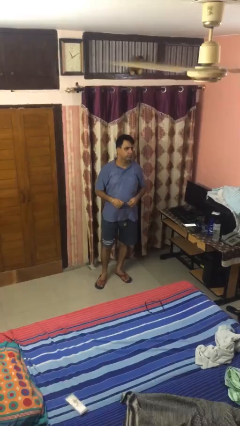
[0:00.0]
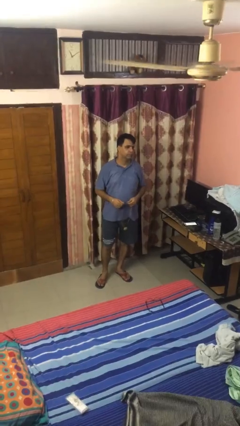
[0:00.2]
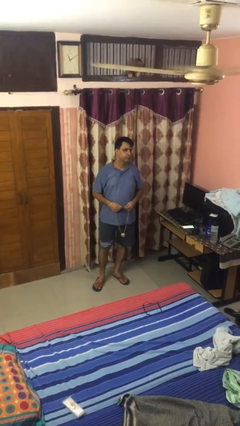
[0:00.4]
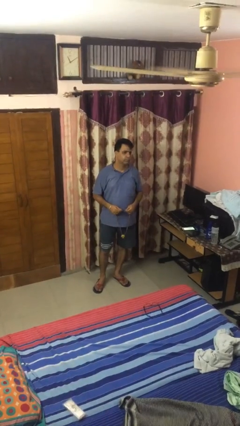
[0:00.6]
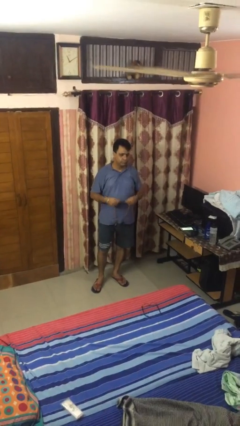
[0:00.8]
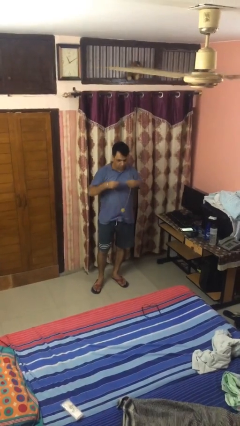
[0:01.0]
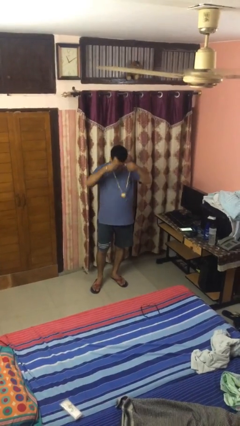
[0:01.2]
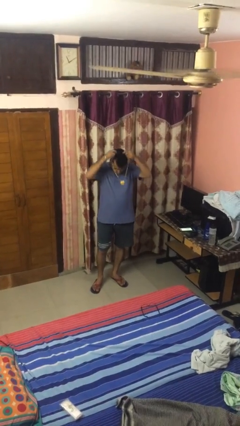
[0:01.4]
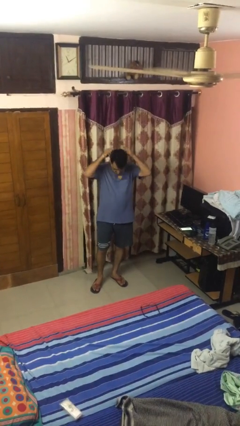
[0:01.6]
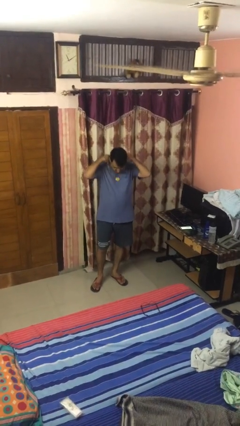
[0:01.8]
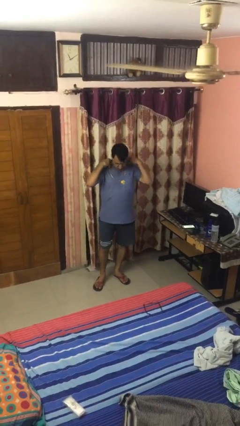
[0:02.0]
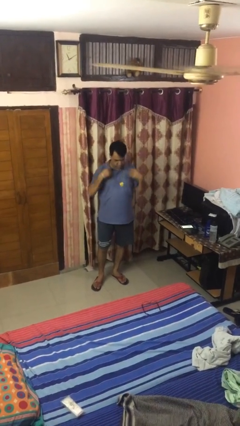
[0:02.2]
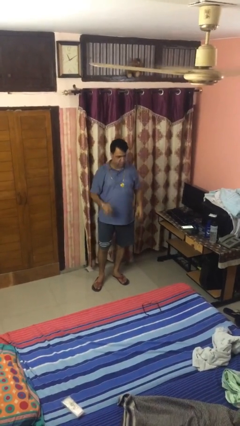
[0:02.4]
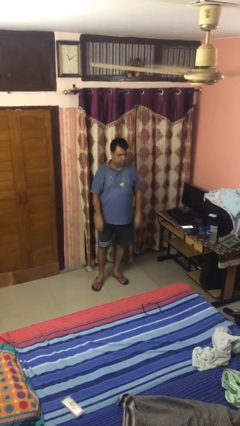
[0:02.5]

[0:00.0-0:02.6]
person puts on necklace

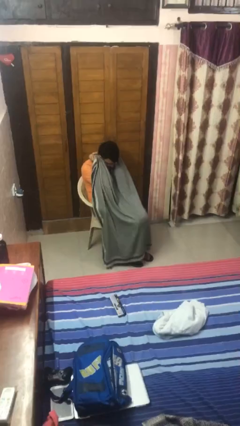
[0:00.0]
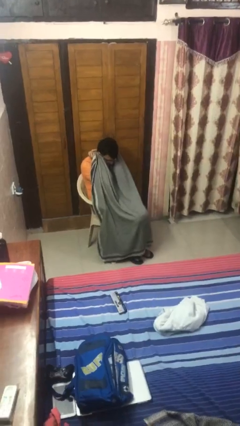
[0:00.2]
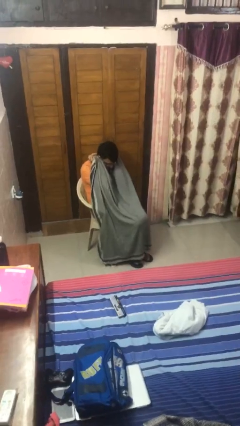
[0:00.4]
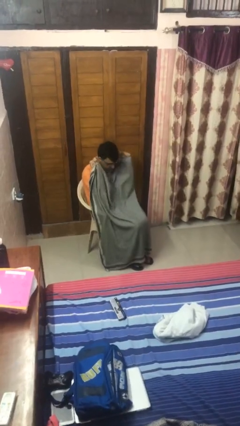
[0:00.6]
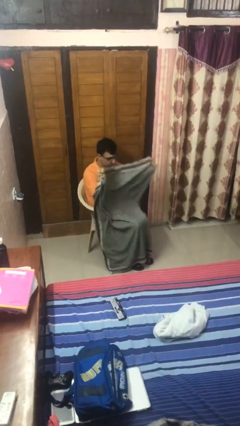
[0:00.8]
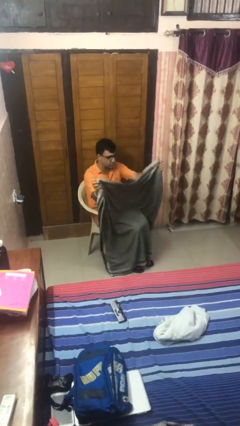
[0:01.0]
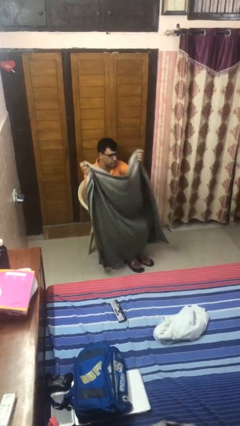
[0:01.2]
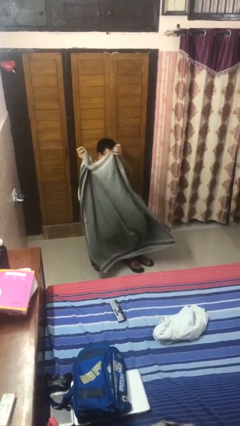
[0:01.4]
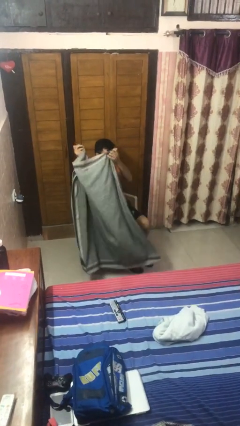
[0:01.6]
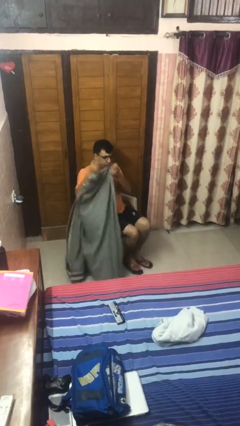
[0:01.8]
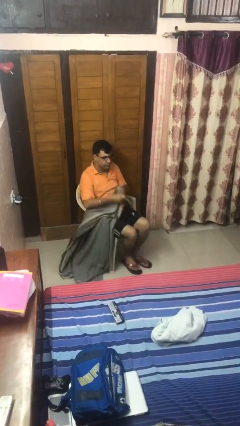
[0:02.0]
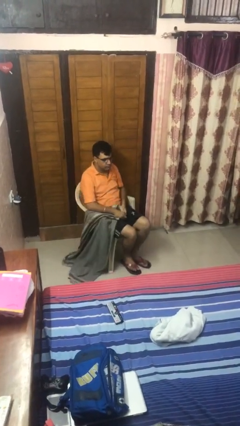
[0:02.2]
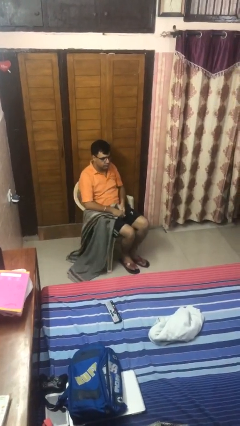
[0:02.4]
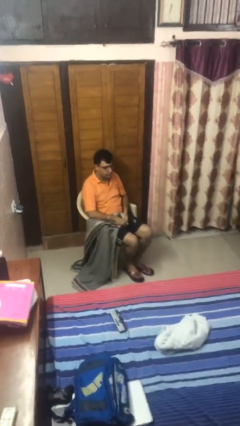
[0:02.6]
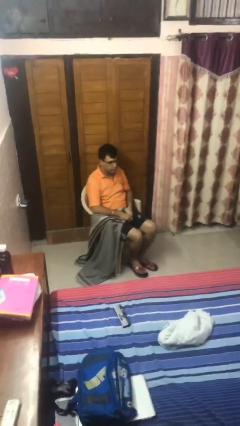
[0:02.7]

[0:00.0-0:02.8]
person uncovers with blanket

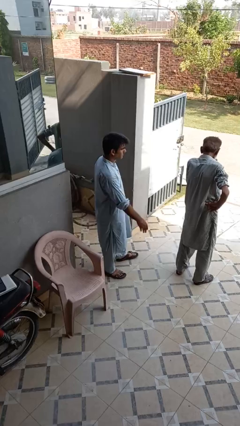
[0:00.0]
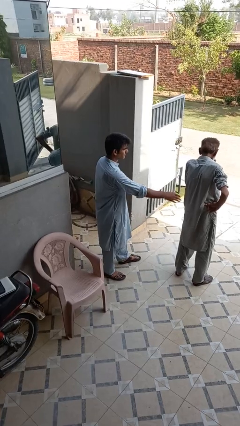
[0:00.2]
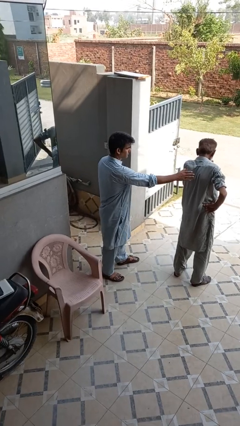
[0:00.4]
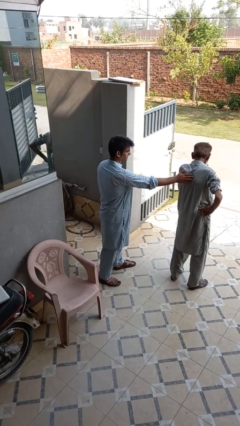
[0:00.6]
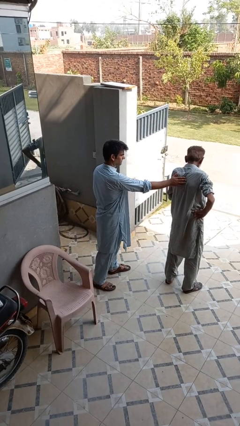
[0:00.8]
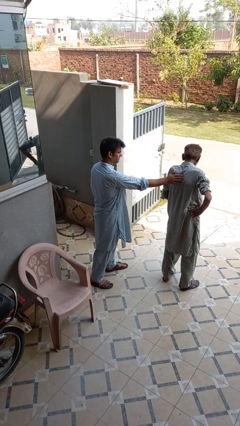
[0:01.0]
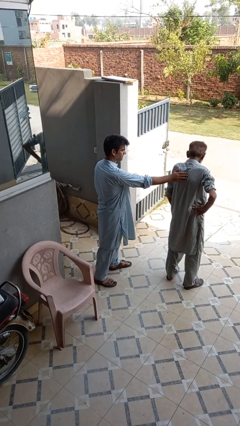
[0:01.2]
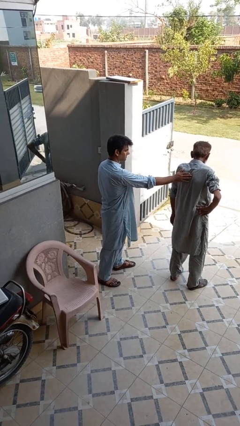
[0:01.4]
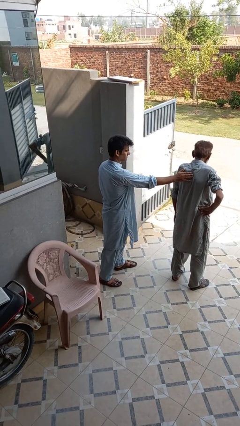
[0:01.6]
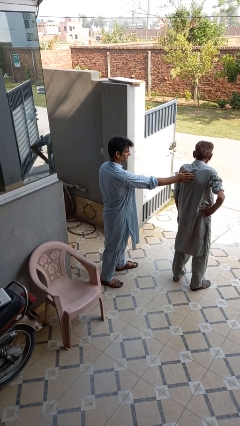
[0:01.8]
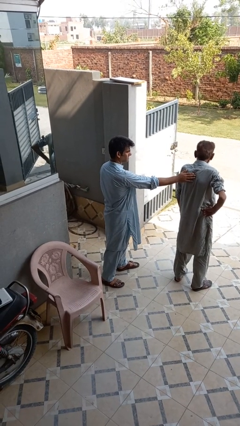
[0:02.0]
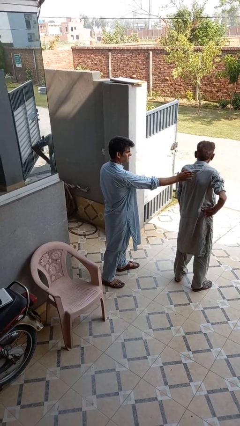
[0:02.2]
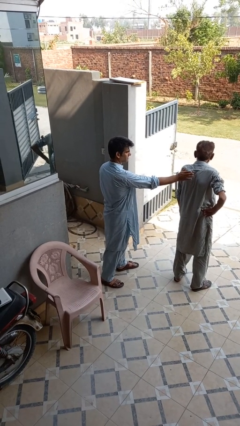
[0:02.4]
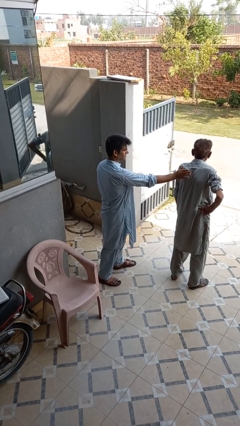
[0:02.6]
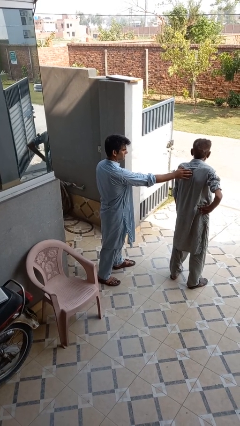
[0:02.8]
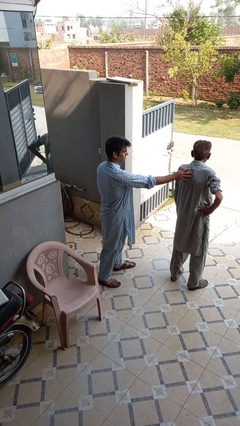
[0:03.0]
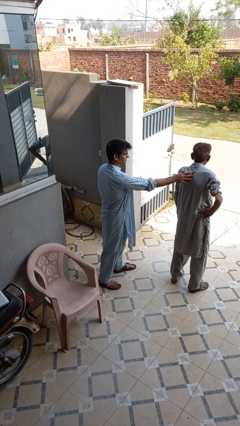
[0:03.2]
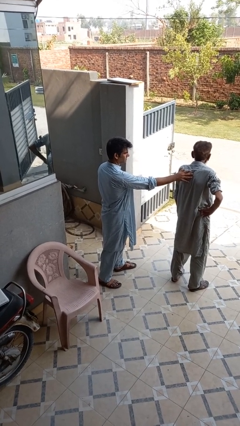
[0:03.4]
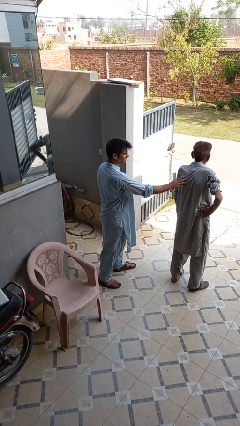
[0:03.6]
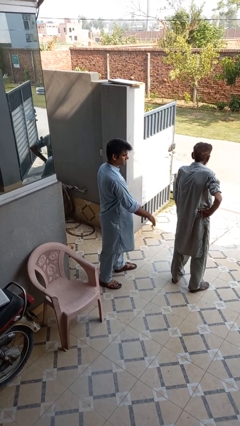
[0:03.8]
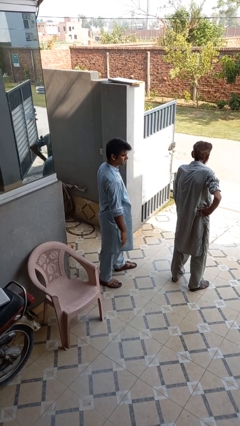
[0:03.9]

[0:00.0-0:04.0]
person touches back of person

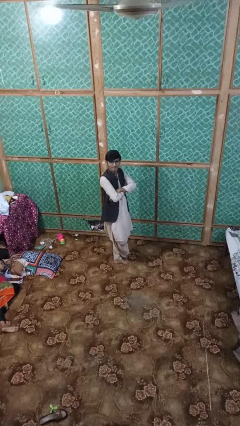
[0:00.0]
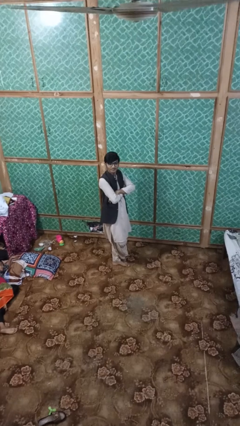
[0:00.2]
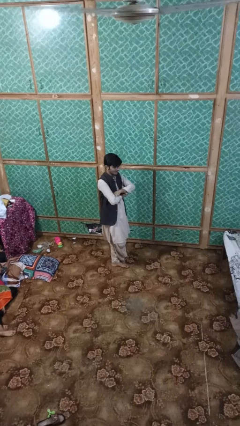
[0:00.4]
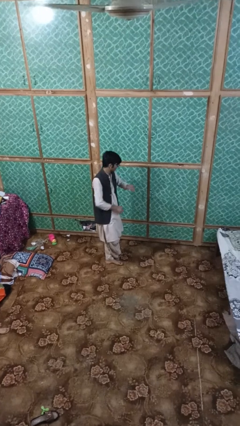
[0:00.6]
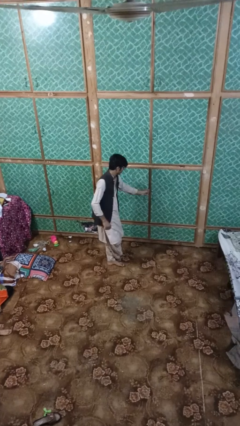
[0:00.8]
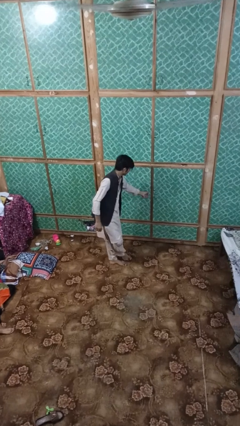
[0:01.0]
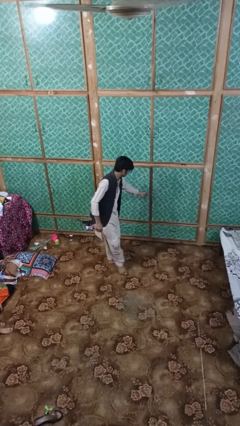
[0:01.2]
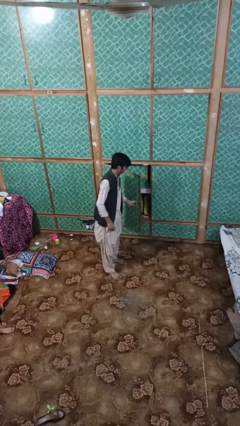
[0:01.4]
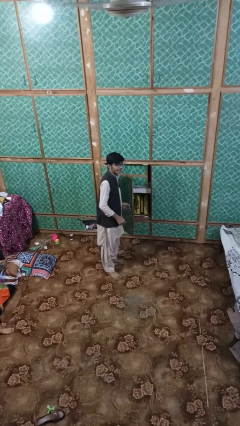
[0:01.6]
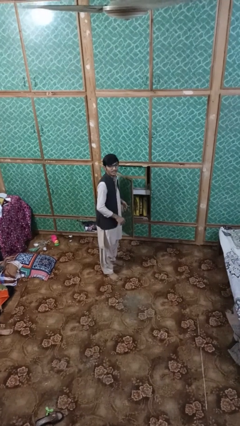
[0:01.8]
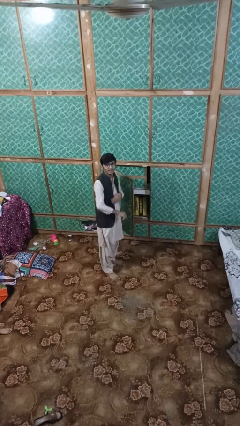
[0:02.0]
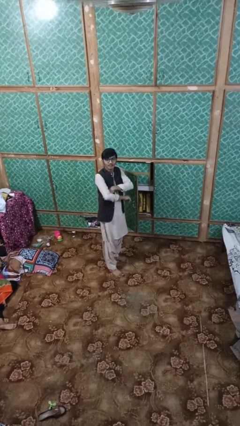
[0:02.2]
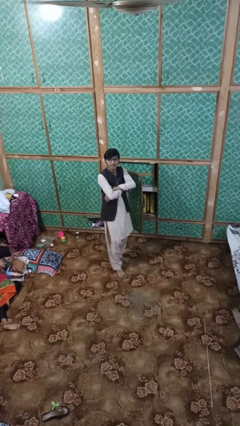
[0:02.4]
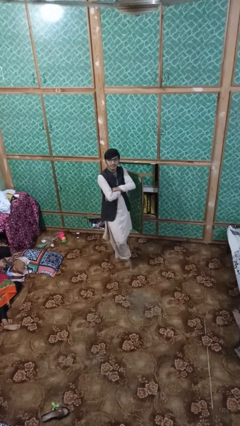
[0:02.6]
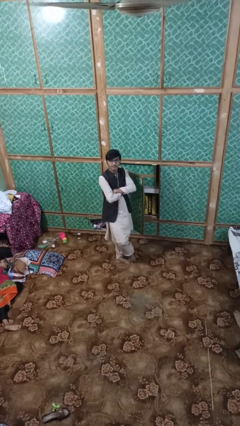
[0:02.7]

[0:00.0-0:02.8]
person opens dresser drawer

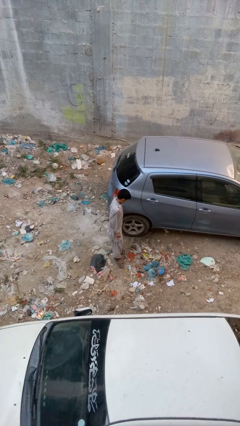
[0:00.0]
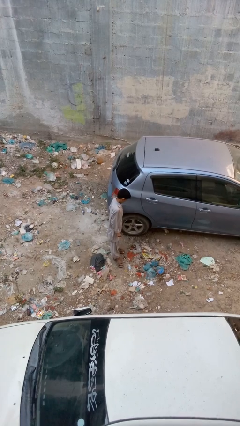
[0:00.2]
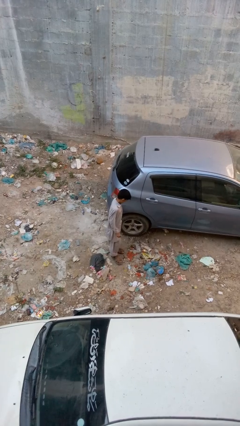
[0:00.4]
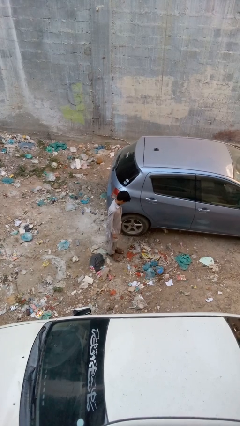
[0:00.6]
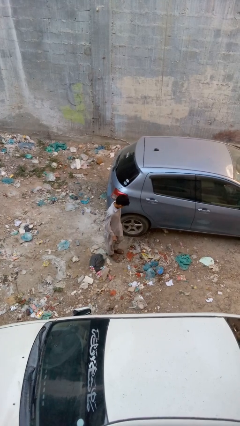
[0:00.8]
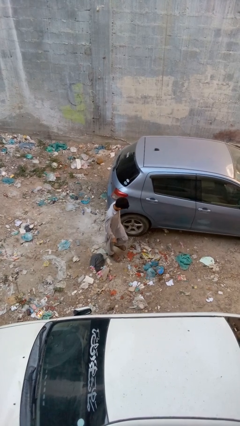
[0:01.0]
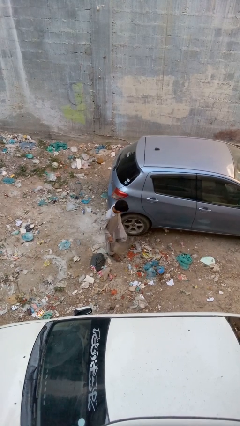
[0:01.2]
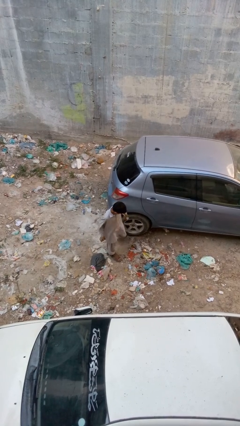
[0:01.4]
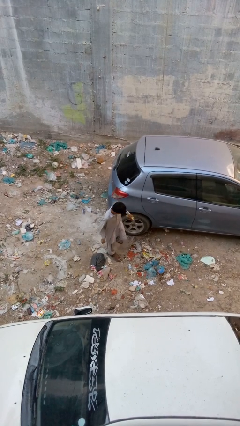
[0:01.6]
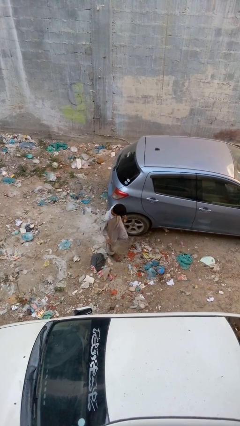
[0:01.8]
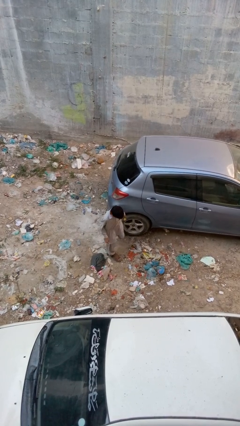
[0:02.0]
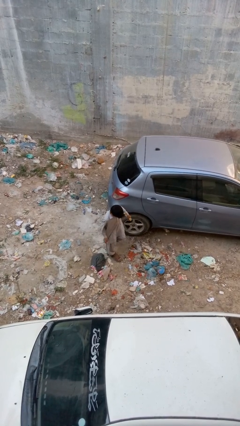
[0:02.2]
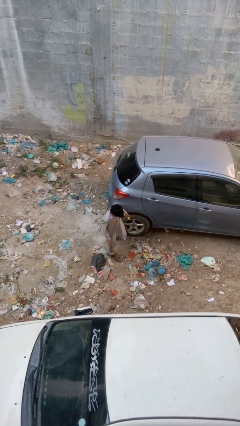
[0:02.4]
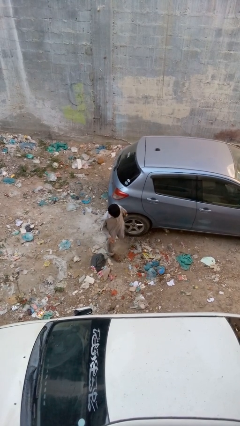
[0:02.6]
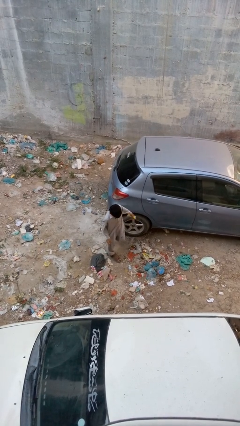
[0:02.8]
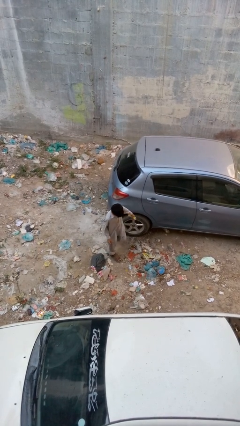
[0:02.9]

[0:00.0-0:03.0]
person kicks car tires

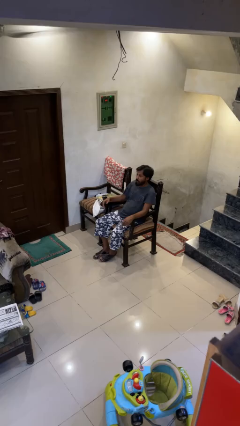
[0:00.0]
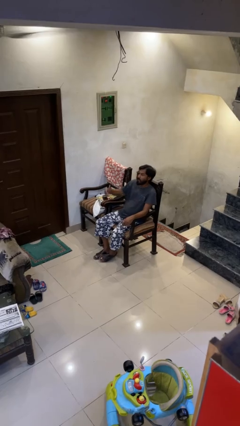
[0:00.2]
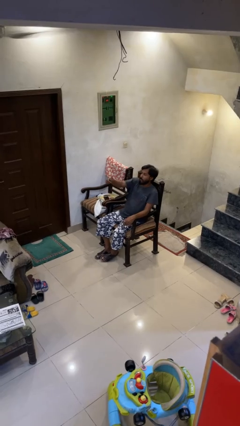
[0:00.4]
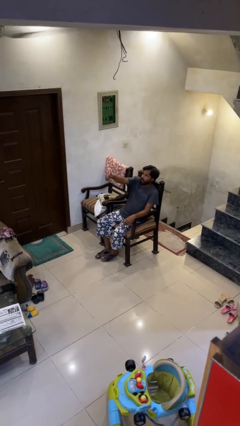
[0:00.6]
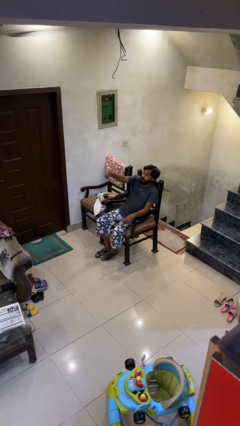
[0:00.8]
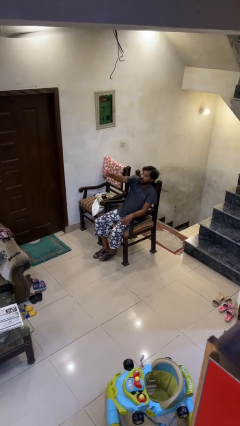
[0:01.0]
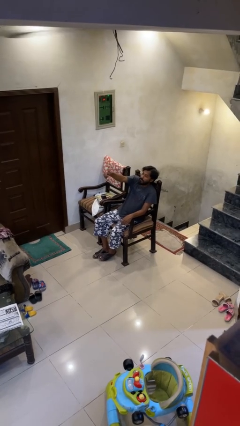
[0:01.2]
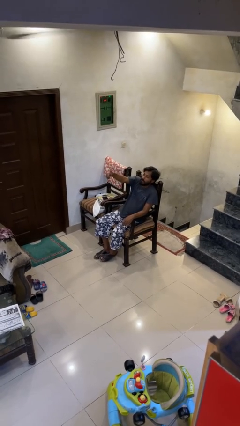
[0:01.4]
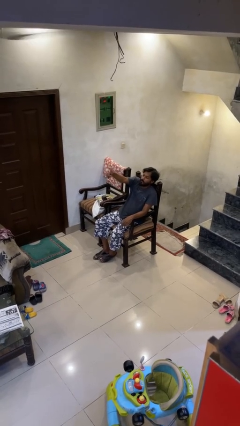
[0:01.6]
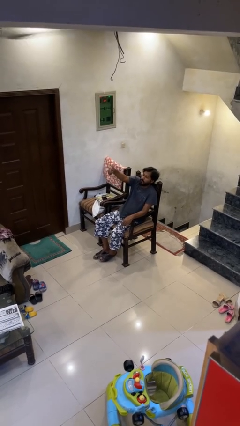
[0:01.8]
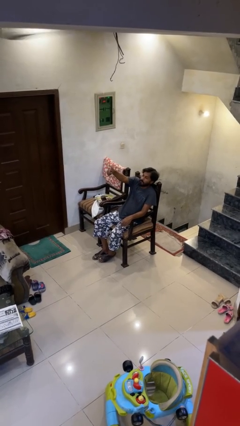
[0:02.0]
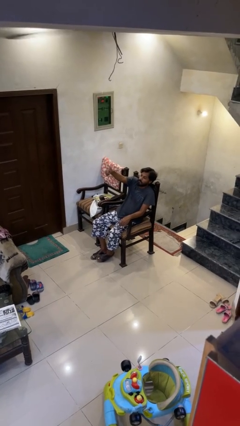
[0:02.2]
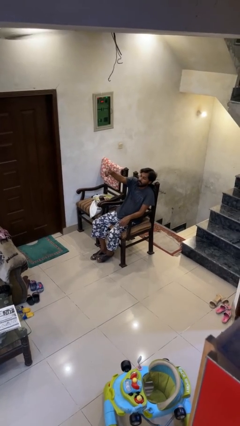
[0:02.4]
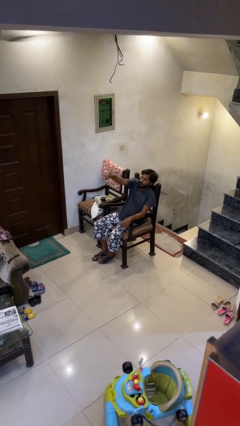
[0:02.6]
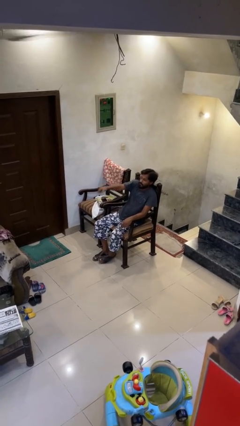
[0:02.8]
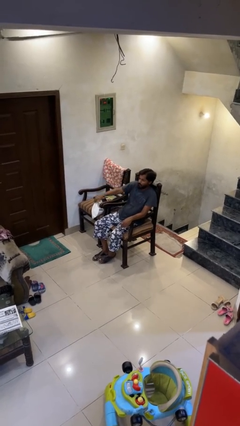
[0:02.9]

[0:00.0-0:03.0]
person gestures thumbs up
